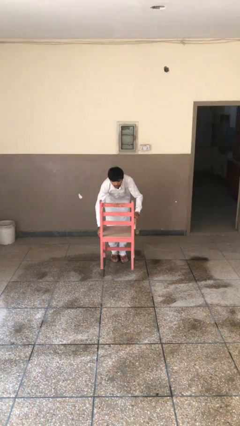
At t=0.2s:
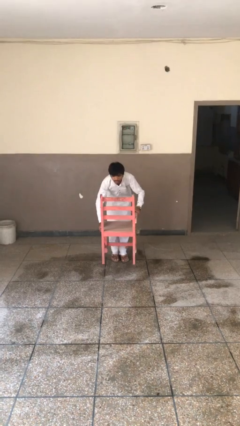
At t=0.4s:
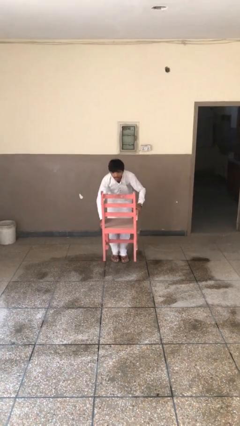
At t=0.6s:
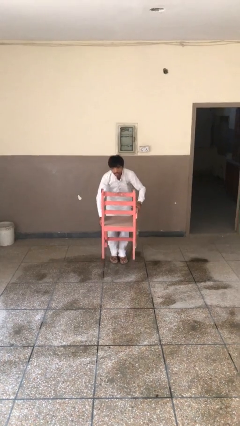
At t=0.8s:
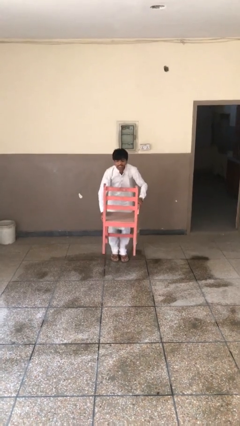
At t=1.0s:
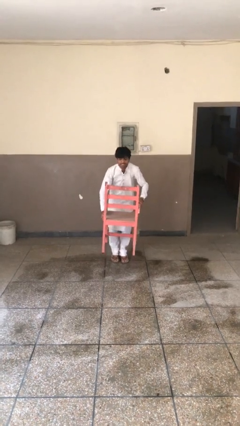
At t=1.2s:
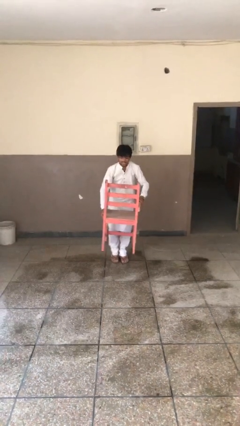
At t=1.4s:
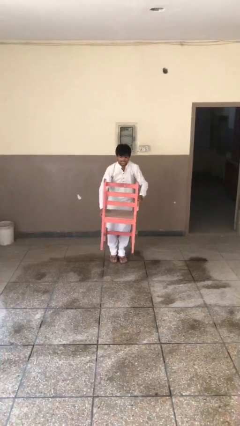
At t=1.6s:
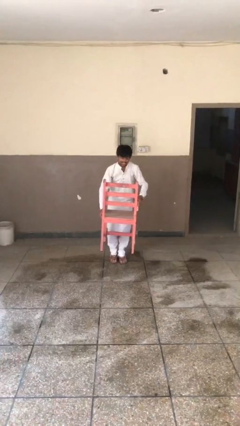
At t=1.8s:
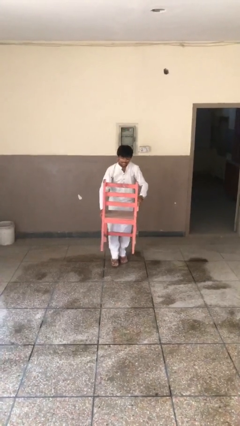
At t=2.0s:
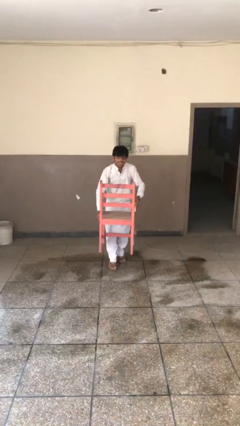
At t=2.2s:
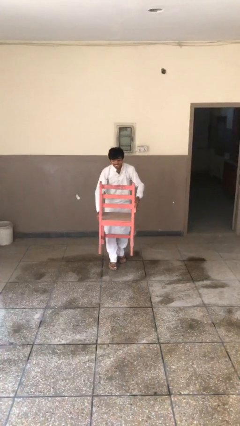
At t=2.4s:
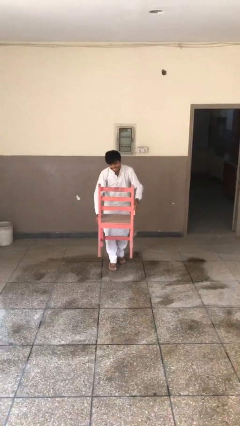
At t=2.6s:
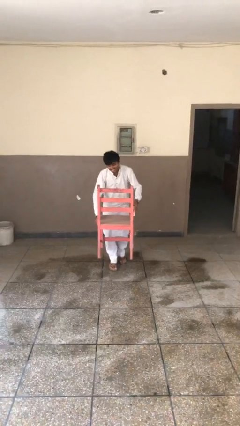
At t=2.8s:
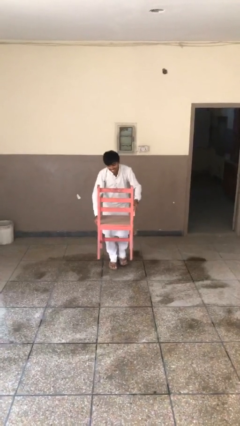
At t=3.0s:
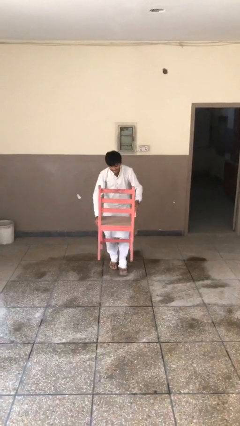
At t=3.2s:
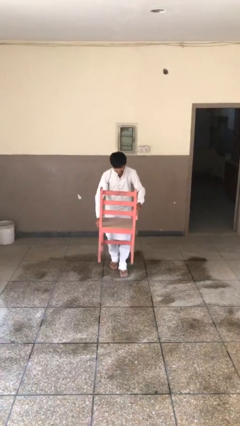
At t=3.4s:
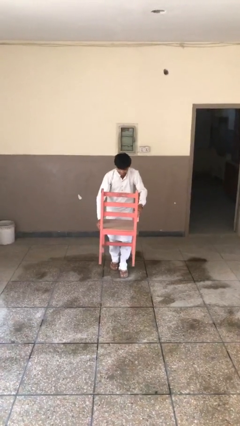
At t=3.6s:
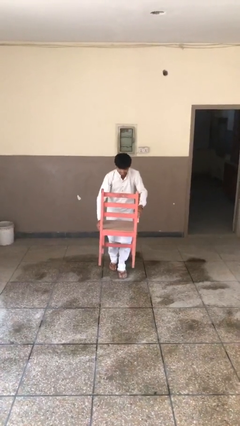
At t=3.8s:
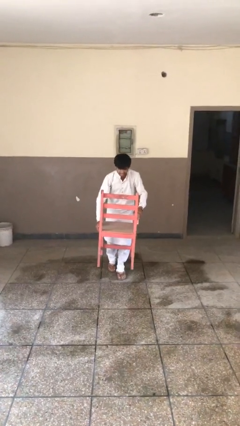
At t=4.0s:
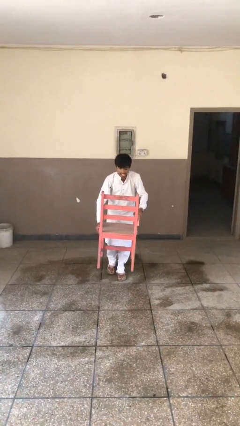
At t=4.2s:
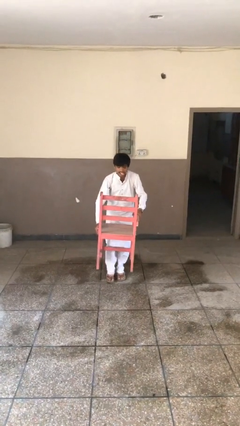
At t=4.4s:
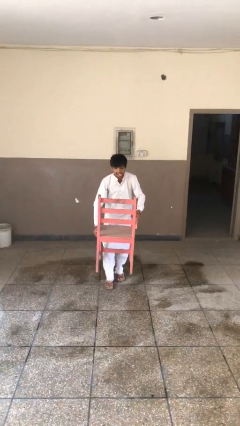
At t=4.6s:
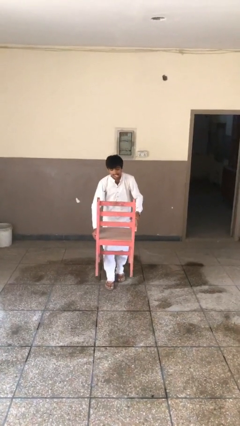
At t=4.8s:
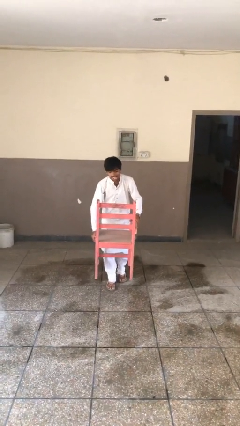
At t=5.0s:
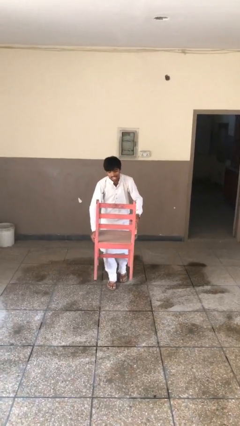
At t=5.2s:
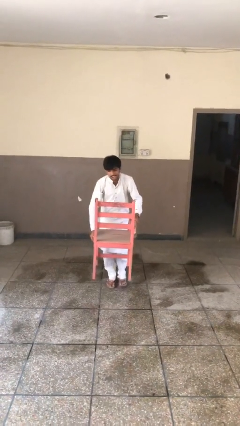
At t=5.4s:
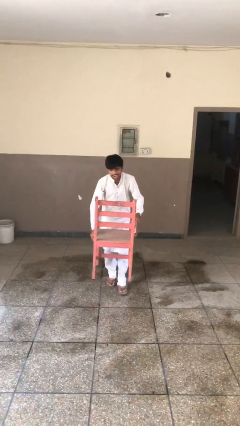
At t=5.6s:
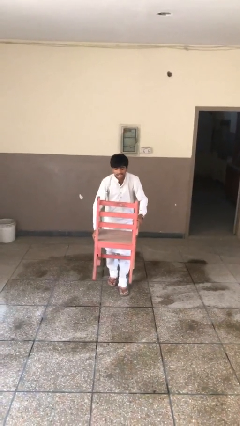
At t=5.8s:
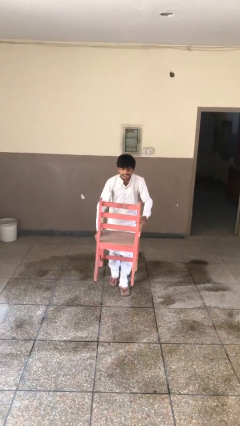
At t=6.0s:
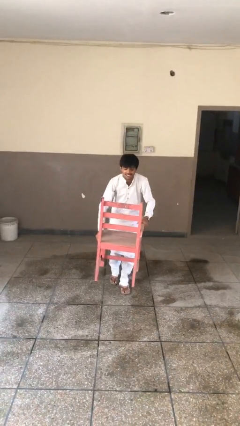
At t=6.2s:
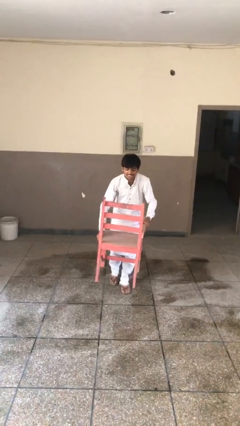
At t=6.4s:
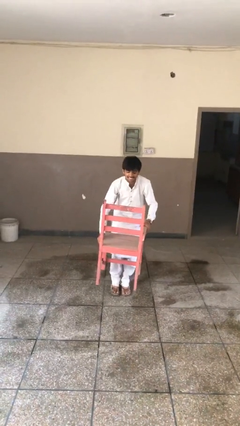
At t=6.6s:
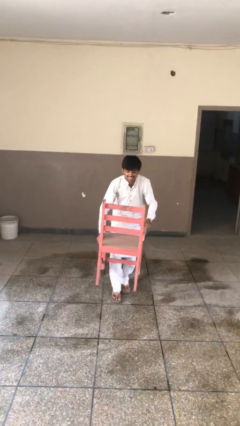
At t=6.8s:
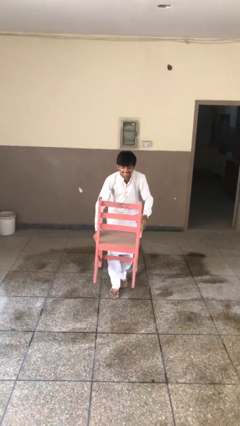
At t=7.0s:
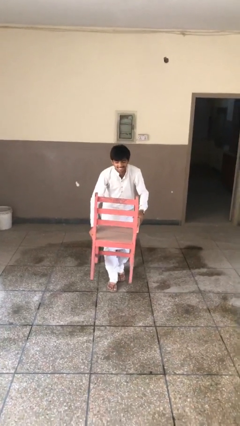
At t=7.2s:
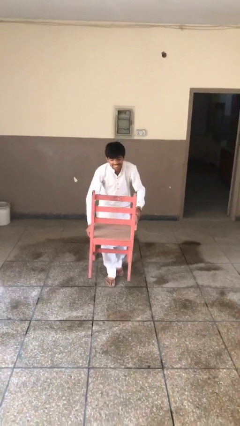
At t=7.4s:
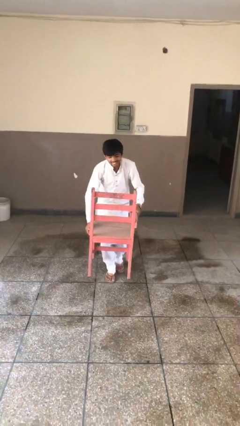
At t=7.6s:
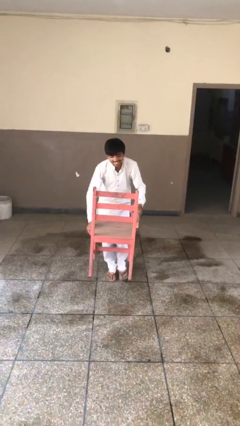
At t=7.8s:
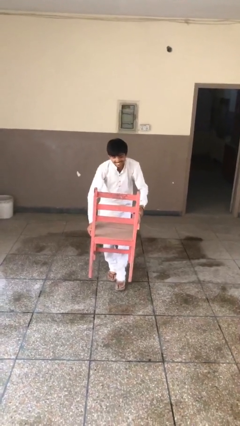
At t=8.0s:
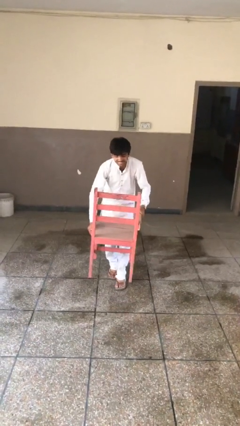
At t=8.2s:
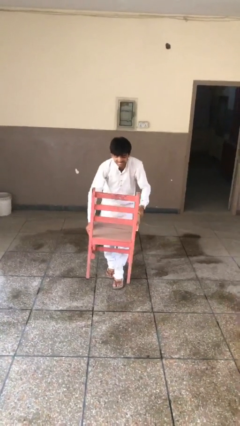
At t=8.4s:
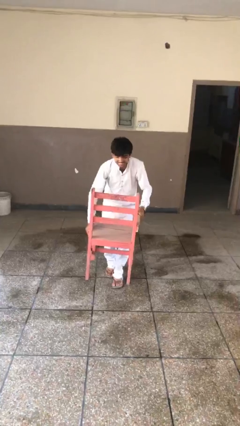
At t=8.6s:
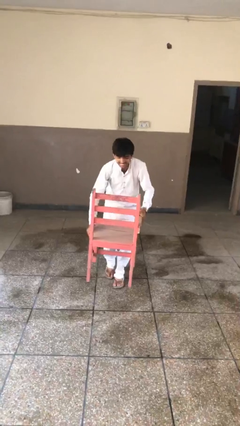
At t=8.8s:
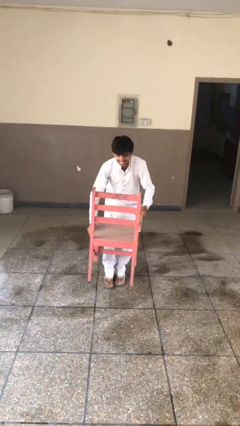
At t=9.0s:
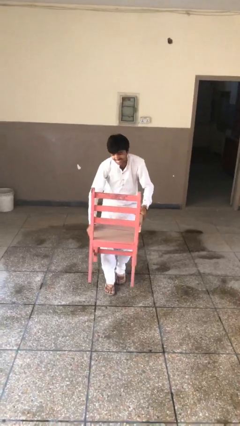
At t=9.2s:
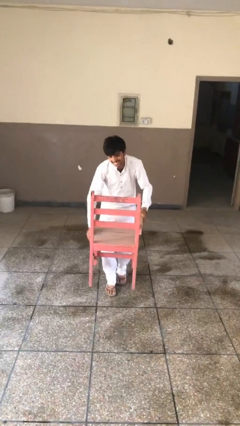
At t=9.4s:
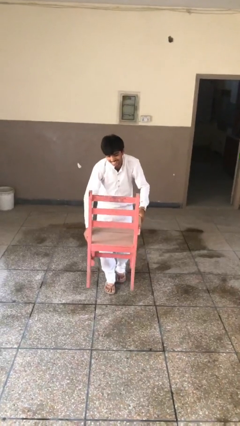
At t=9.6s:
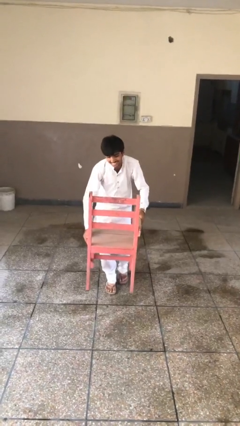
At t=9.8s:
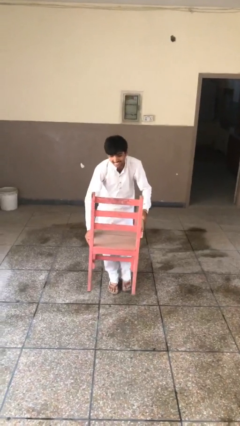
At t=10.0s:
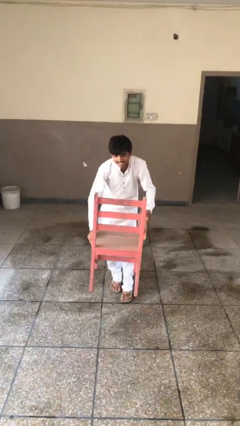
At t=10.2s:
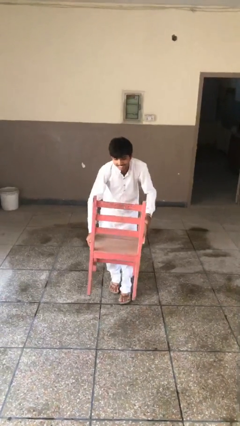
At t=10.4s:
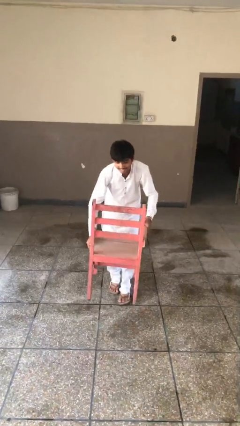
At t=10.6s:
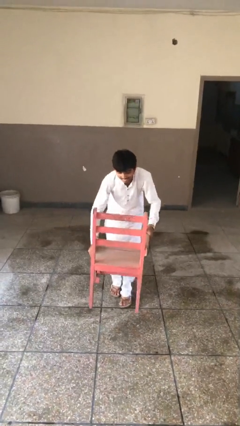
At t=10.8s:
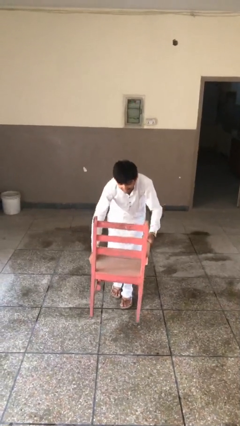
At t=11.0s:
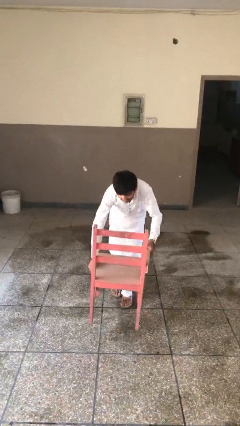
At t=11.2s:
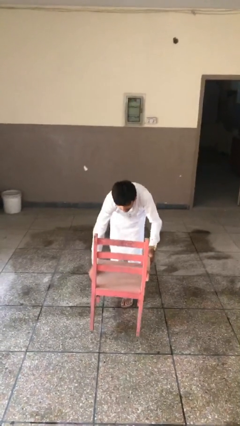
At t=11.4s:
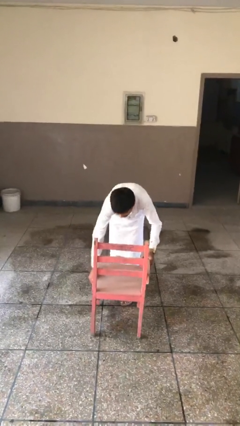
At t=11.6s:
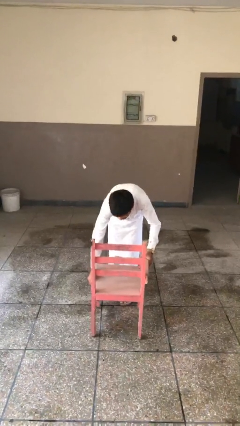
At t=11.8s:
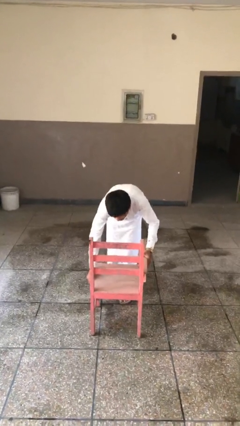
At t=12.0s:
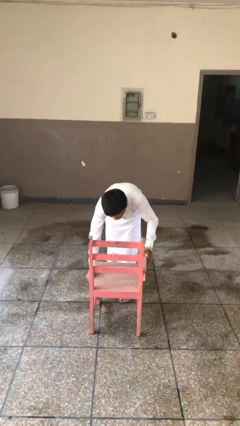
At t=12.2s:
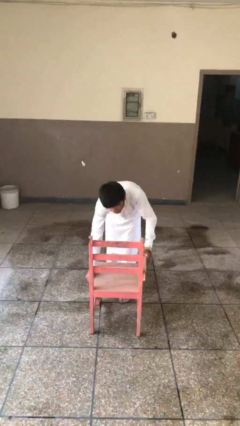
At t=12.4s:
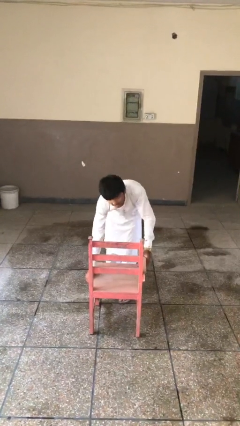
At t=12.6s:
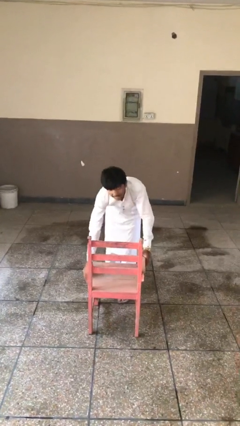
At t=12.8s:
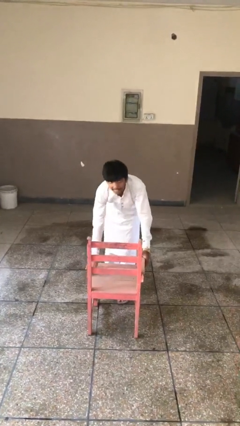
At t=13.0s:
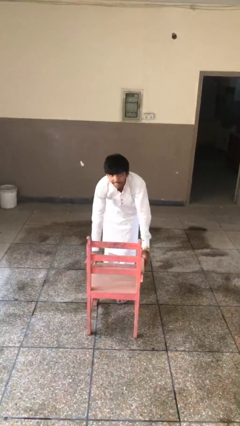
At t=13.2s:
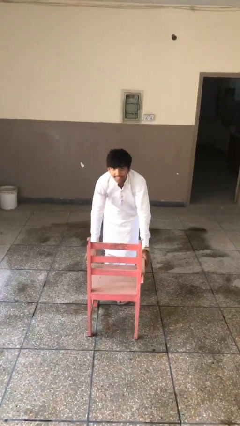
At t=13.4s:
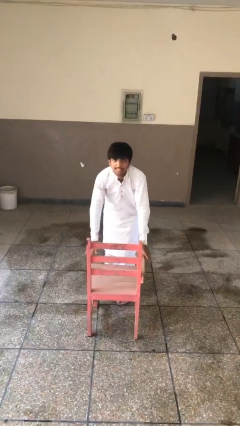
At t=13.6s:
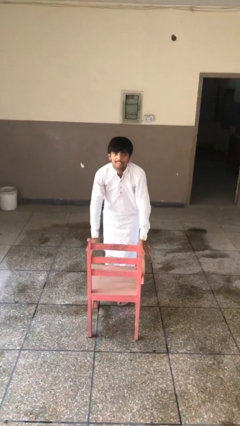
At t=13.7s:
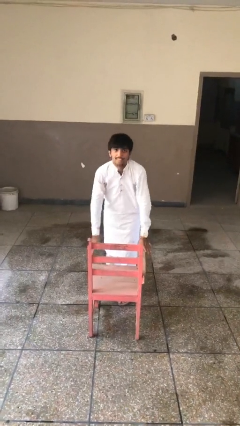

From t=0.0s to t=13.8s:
person carries heavy object

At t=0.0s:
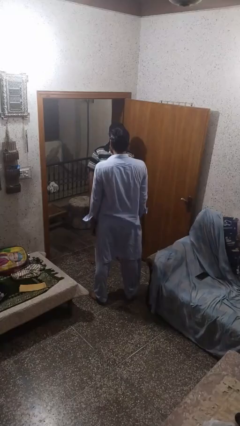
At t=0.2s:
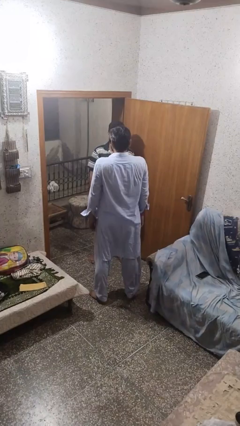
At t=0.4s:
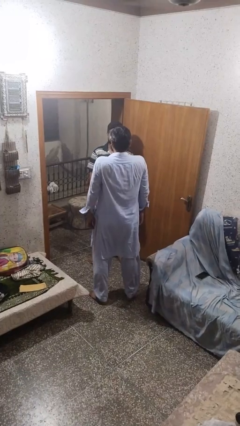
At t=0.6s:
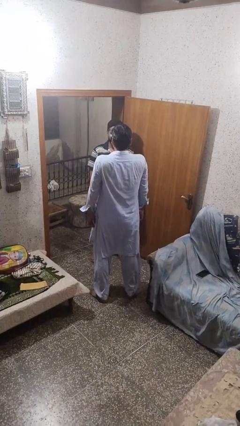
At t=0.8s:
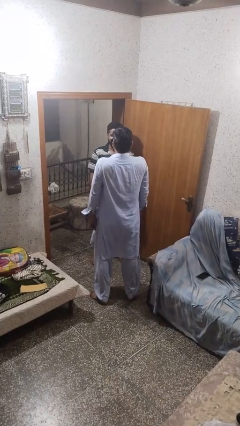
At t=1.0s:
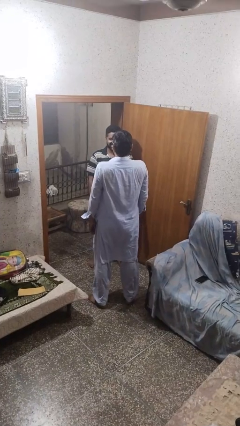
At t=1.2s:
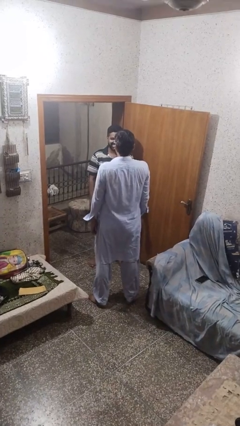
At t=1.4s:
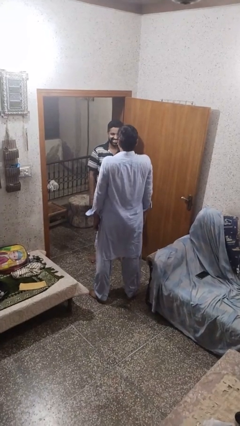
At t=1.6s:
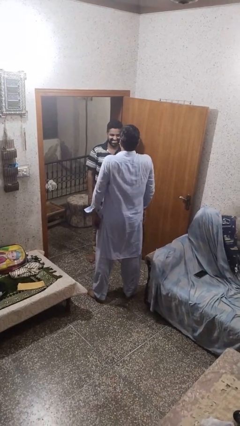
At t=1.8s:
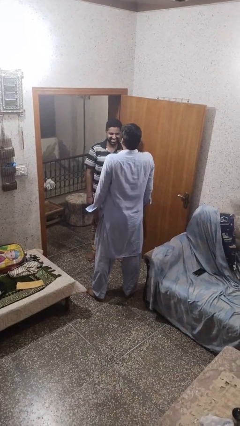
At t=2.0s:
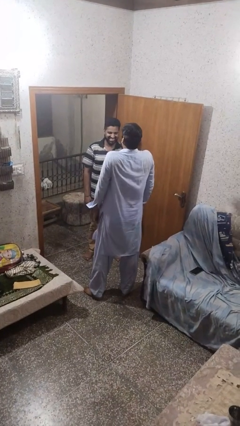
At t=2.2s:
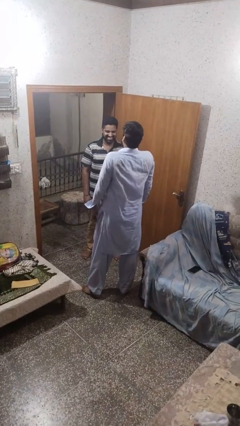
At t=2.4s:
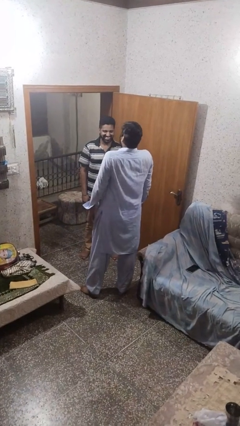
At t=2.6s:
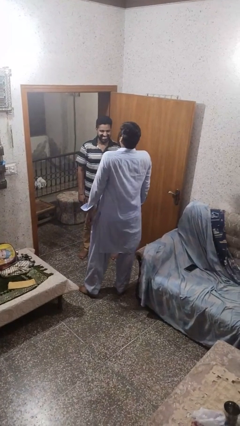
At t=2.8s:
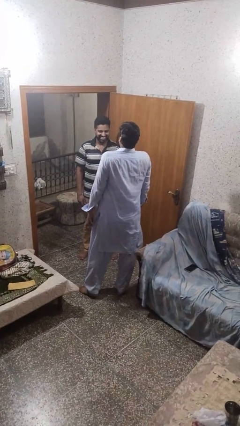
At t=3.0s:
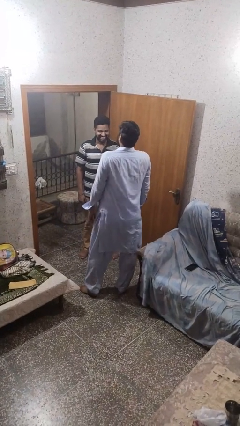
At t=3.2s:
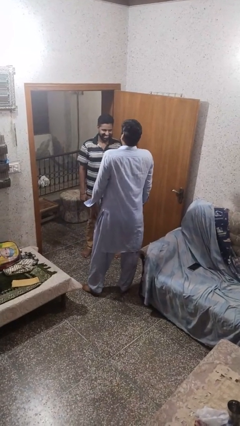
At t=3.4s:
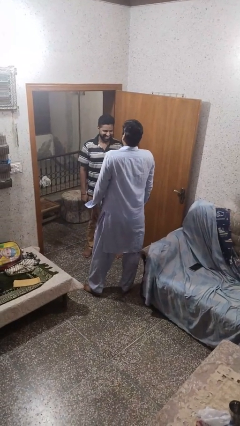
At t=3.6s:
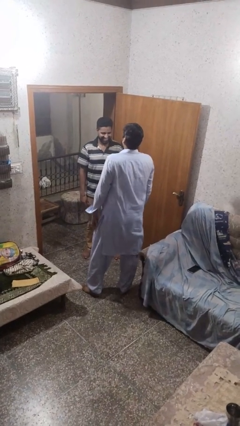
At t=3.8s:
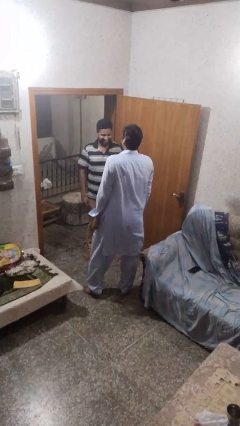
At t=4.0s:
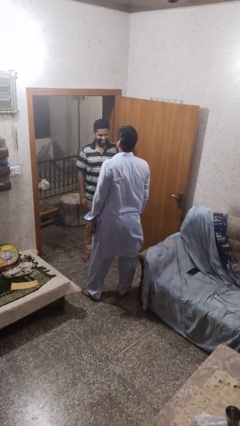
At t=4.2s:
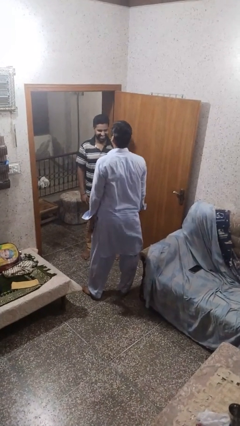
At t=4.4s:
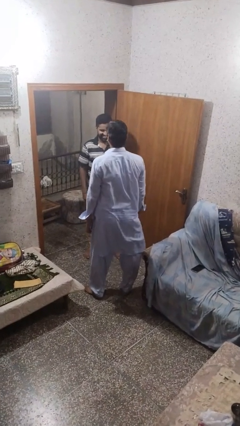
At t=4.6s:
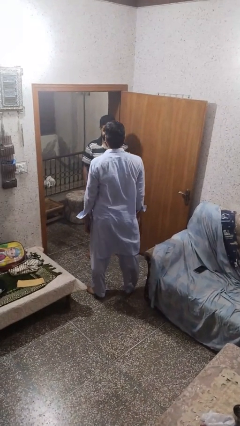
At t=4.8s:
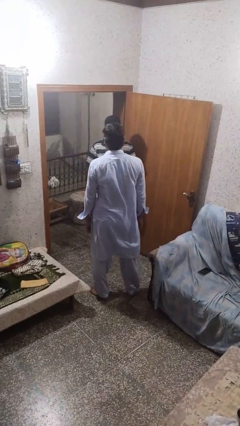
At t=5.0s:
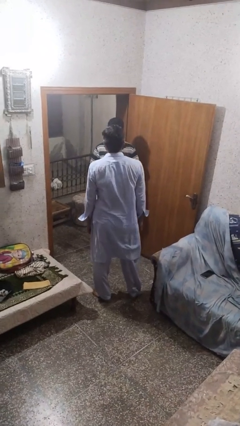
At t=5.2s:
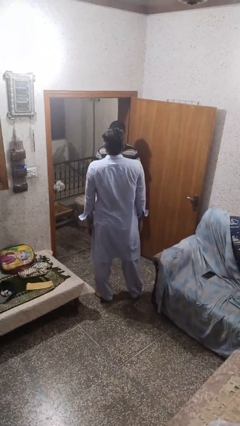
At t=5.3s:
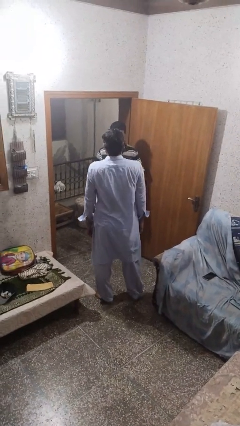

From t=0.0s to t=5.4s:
person laughs with person
